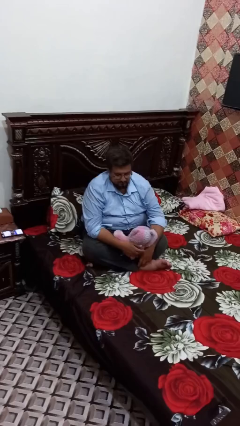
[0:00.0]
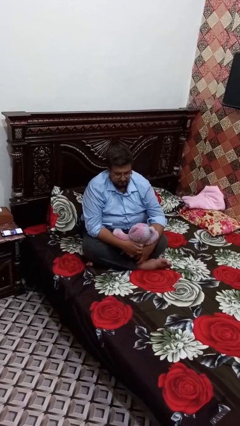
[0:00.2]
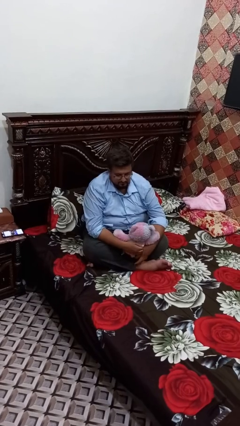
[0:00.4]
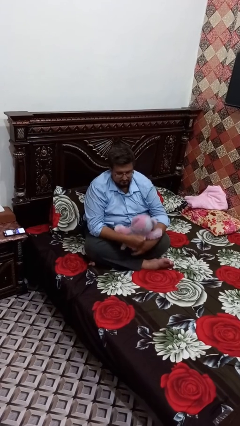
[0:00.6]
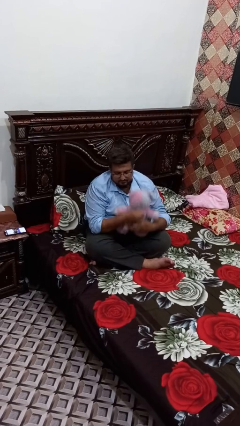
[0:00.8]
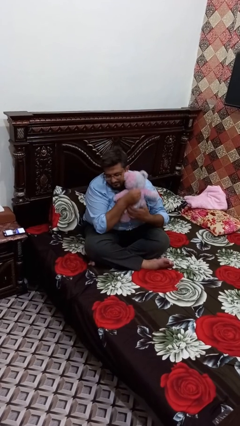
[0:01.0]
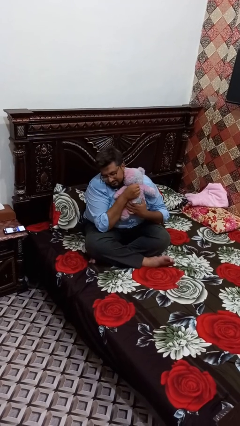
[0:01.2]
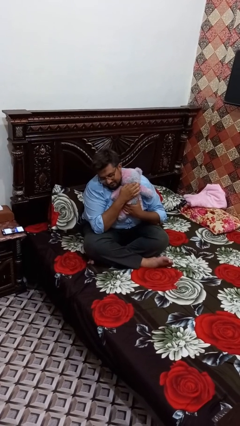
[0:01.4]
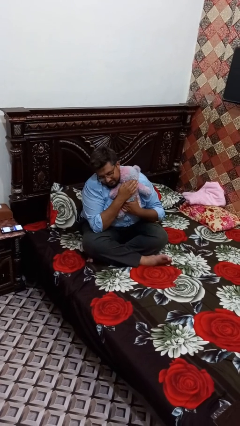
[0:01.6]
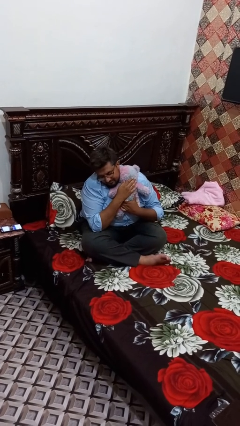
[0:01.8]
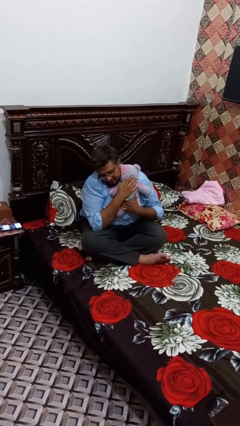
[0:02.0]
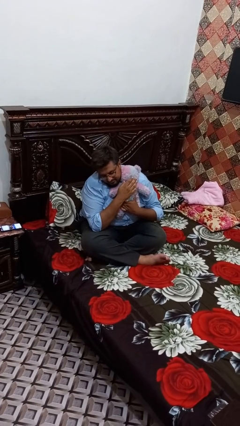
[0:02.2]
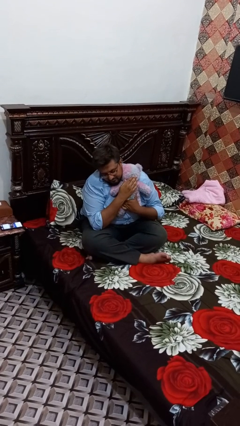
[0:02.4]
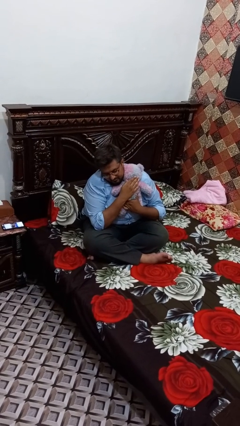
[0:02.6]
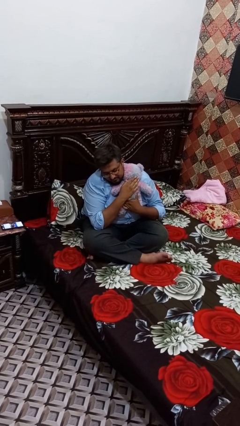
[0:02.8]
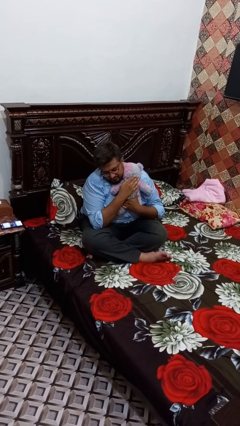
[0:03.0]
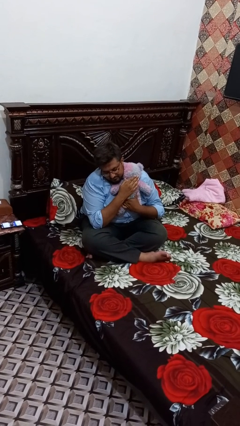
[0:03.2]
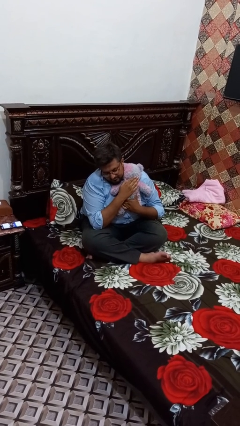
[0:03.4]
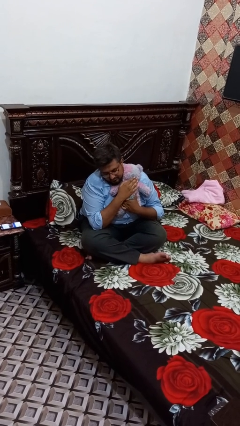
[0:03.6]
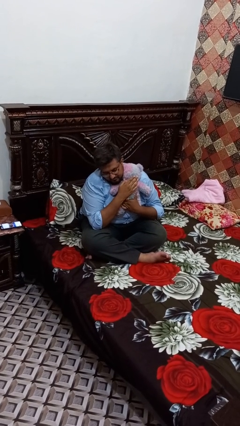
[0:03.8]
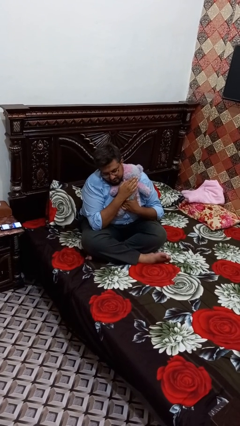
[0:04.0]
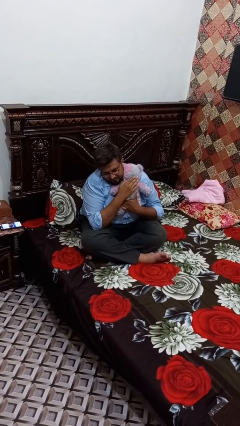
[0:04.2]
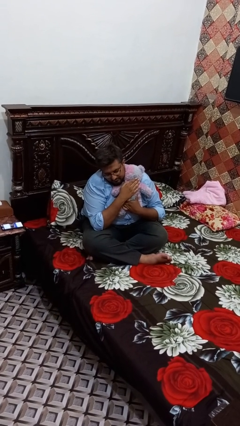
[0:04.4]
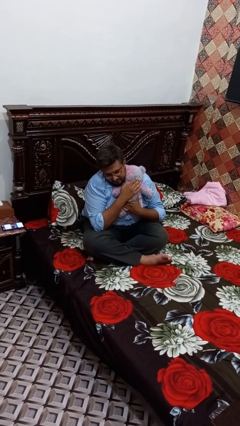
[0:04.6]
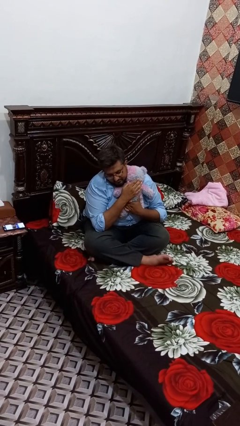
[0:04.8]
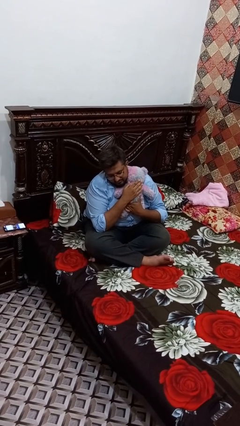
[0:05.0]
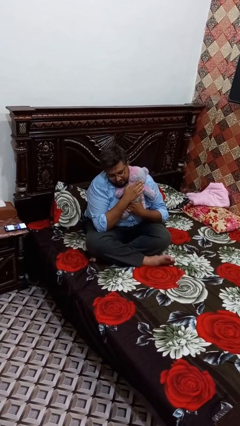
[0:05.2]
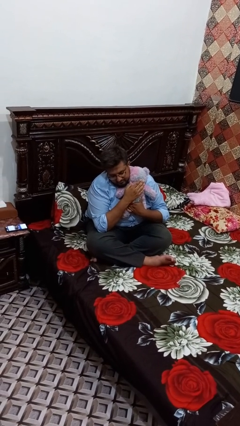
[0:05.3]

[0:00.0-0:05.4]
person hugs stuffed animal

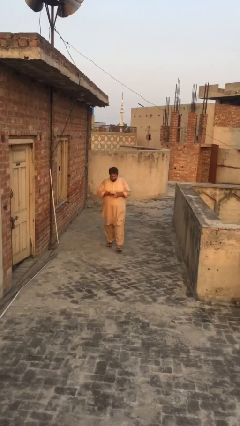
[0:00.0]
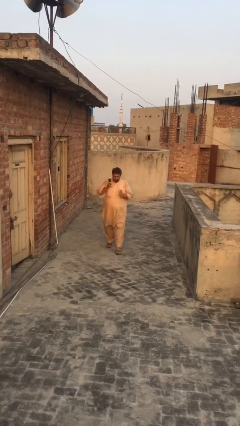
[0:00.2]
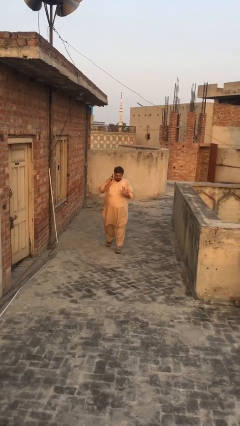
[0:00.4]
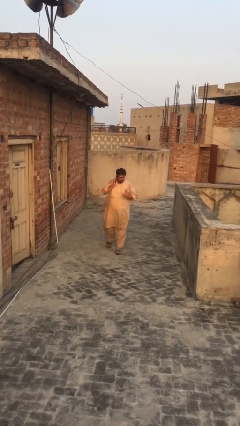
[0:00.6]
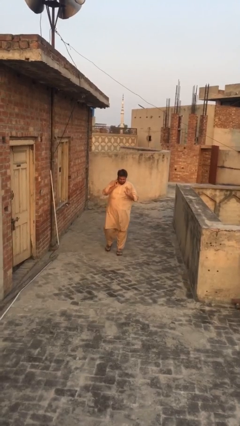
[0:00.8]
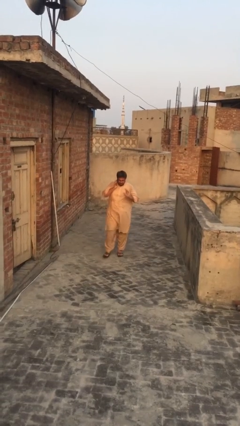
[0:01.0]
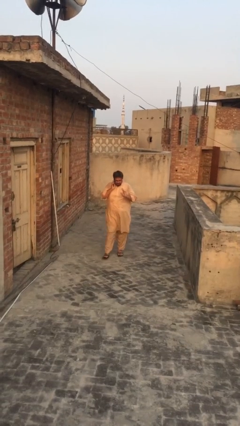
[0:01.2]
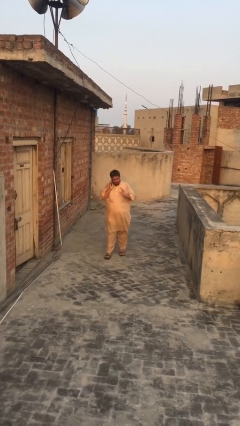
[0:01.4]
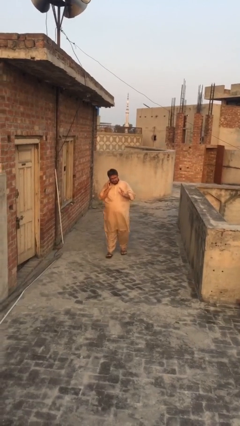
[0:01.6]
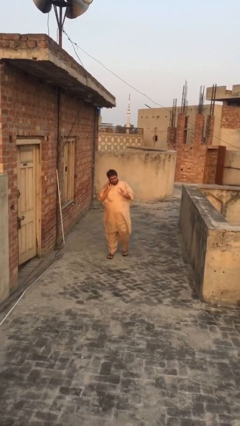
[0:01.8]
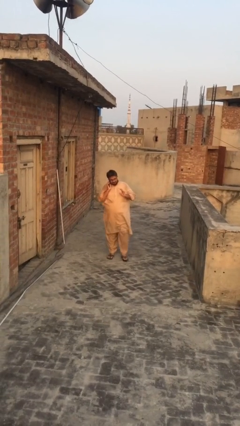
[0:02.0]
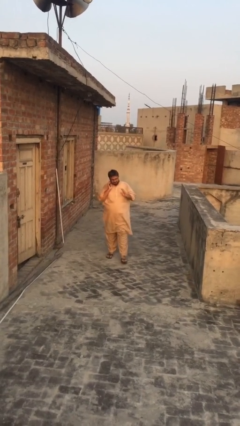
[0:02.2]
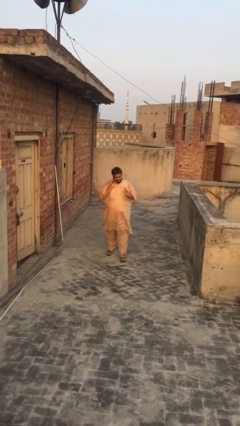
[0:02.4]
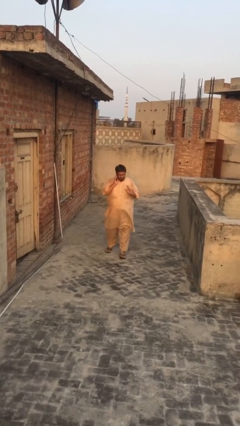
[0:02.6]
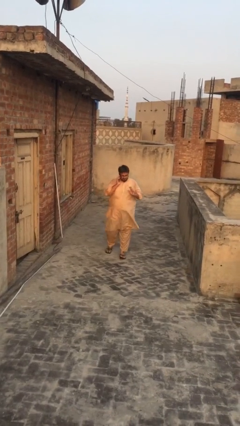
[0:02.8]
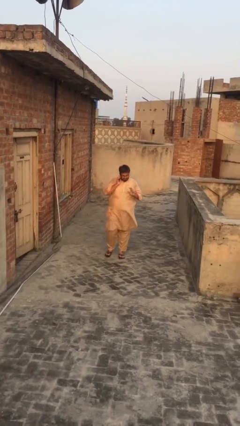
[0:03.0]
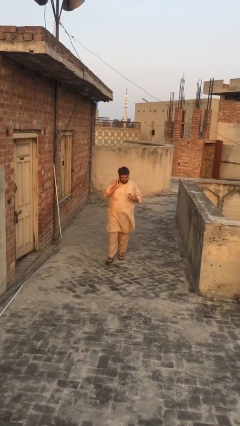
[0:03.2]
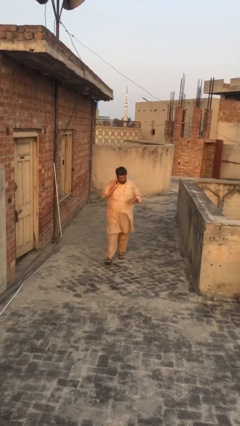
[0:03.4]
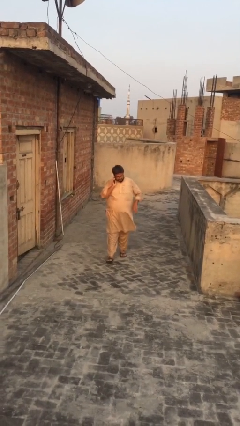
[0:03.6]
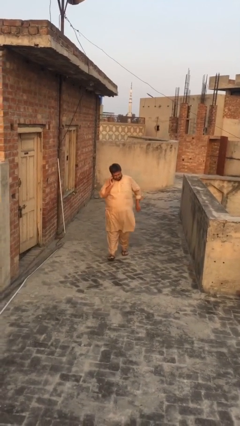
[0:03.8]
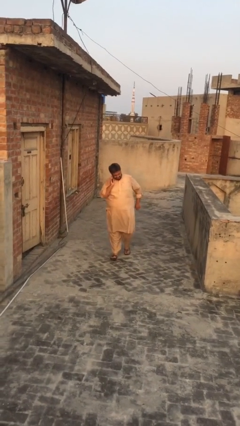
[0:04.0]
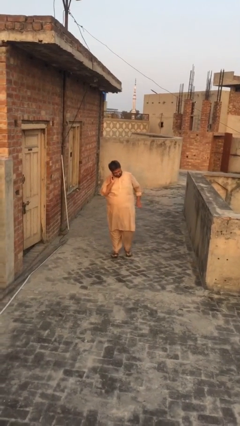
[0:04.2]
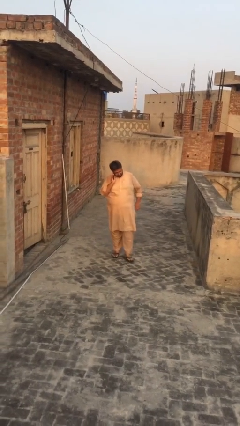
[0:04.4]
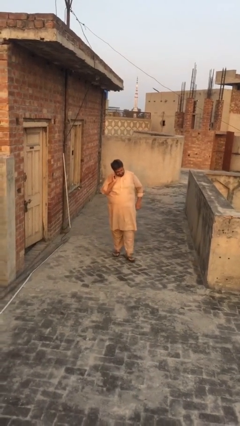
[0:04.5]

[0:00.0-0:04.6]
person talks on phone

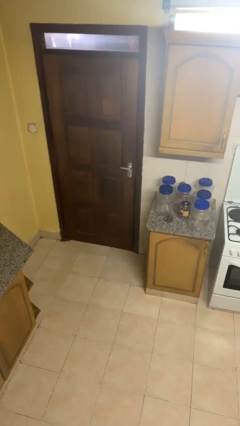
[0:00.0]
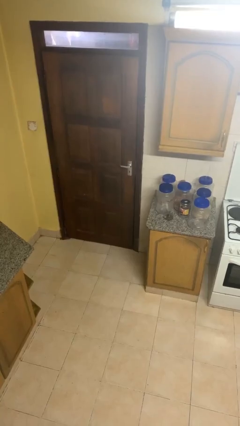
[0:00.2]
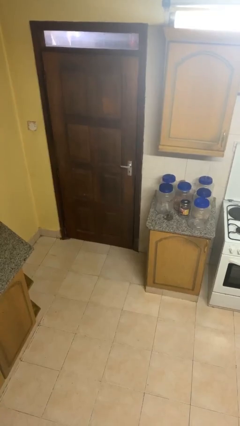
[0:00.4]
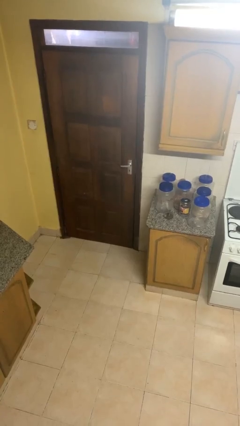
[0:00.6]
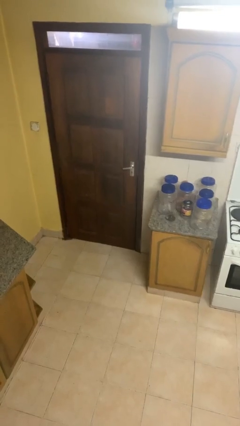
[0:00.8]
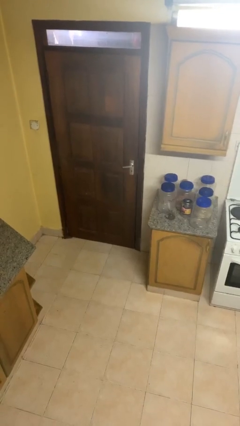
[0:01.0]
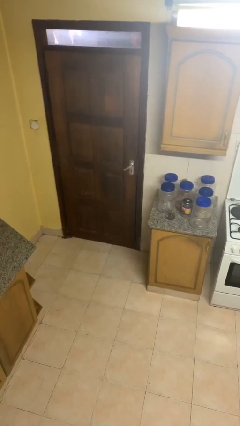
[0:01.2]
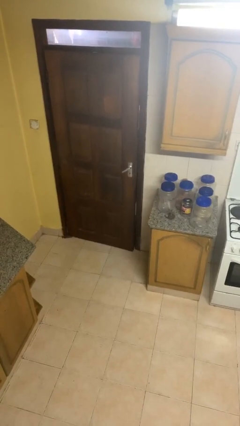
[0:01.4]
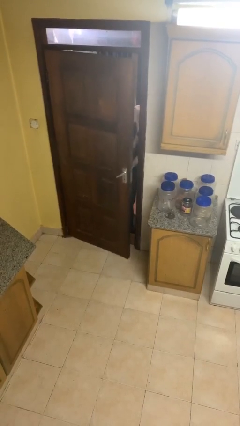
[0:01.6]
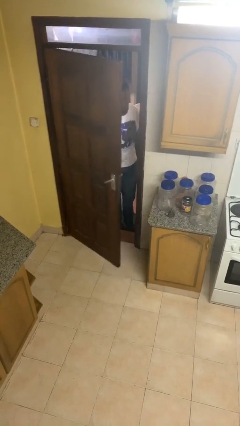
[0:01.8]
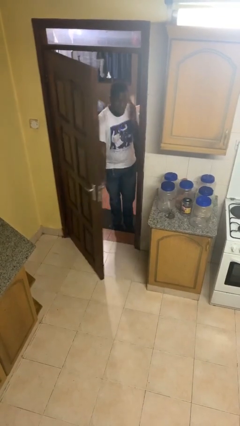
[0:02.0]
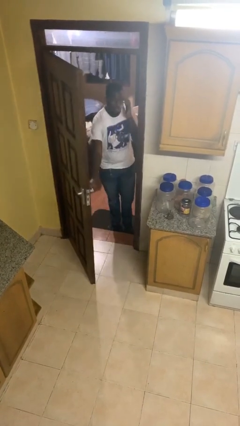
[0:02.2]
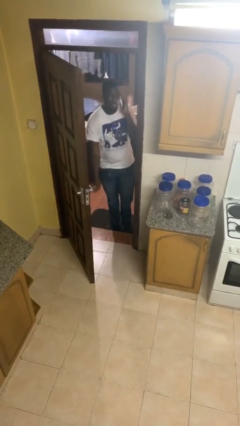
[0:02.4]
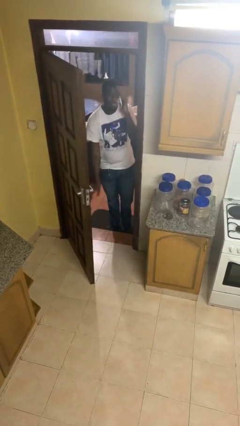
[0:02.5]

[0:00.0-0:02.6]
person opens facility door

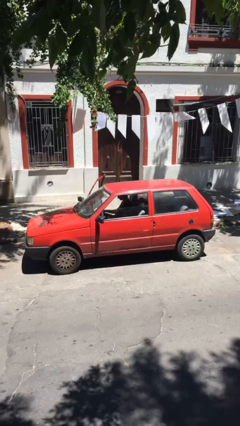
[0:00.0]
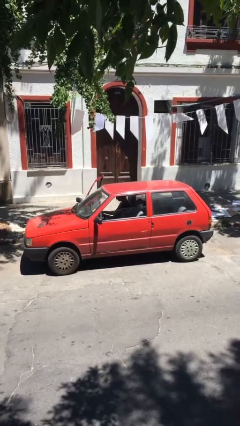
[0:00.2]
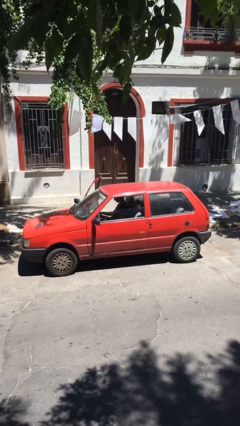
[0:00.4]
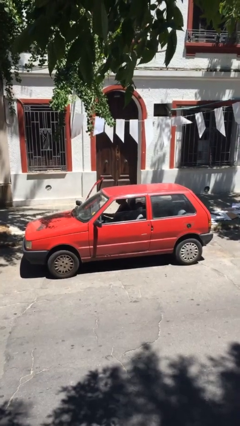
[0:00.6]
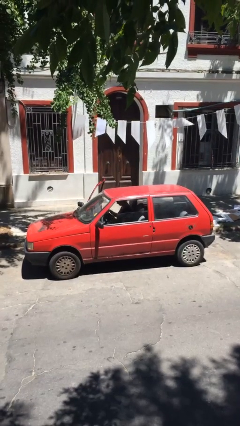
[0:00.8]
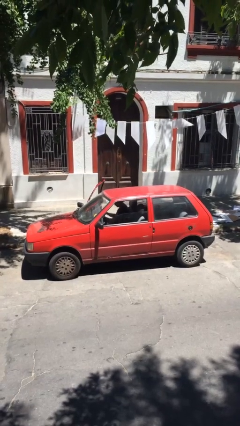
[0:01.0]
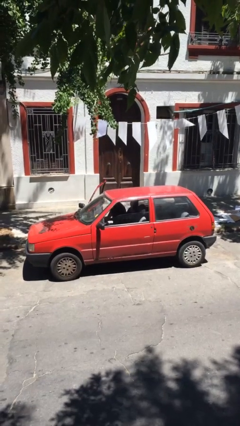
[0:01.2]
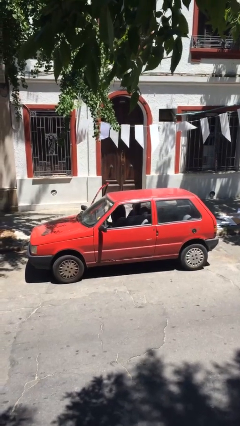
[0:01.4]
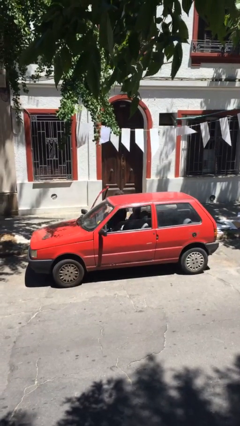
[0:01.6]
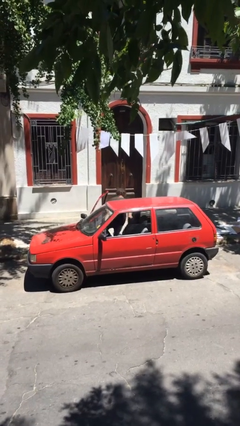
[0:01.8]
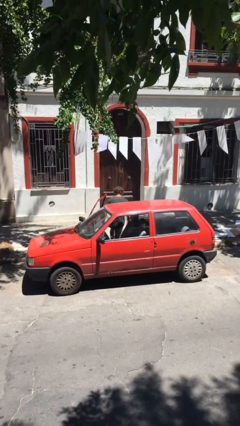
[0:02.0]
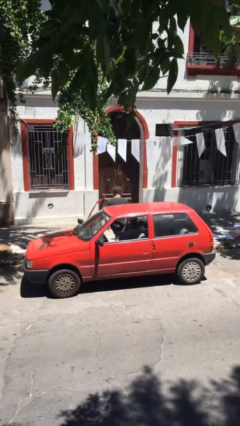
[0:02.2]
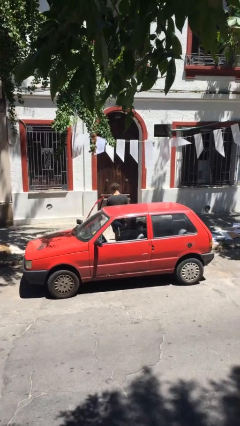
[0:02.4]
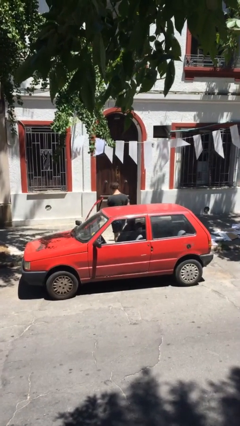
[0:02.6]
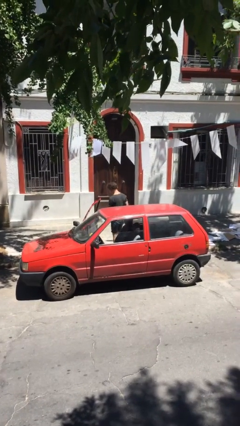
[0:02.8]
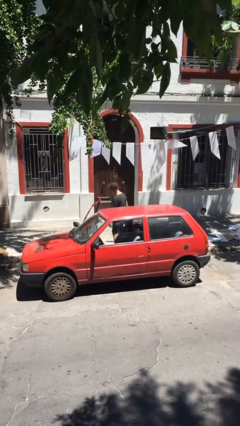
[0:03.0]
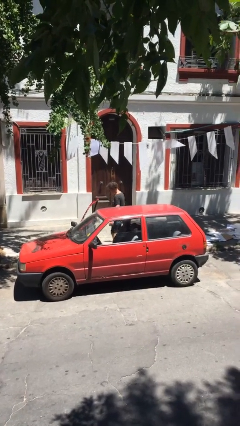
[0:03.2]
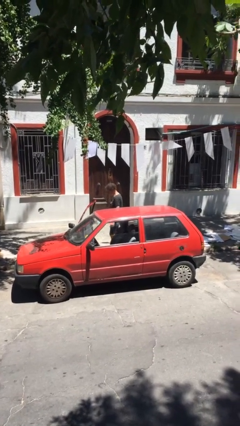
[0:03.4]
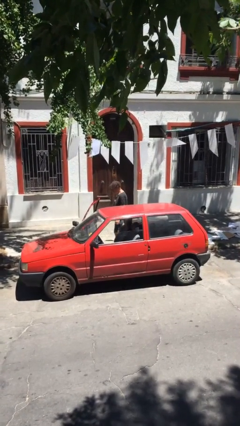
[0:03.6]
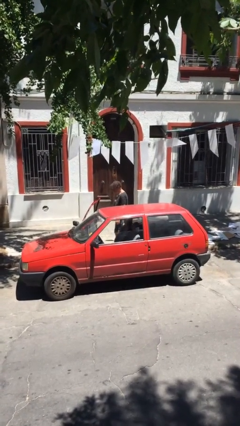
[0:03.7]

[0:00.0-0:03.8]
person exits car

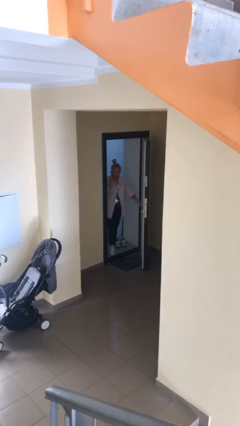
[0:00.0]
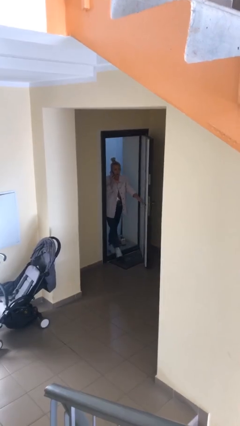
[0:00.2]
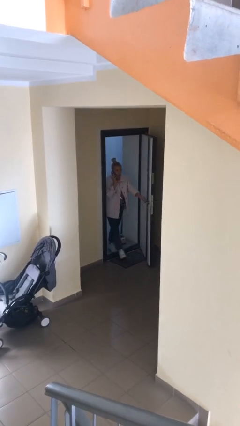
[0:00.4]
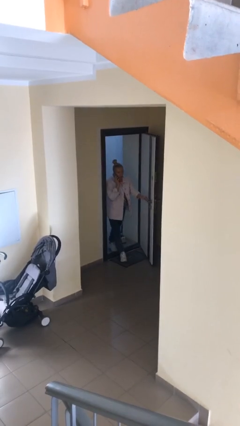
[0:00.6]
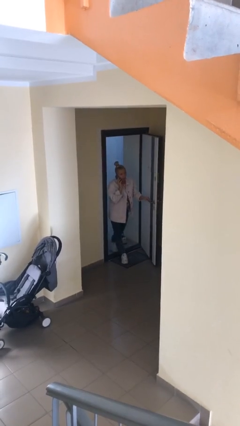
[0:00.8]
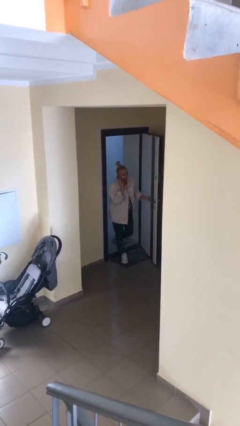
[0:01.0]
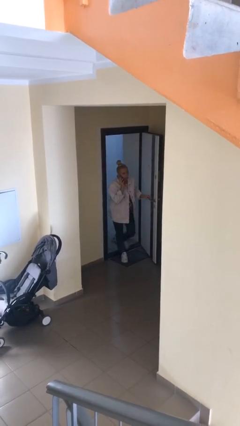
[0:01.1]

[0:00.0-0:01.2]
person enters scene through structure
